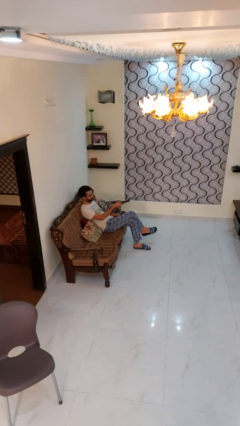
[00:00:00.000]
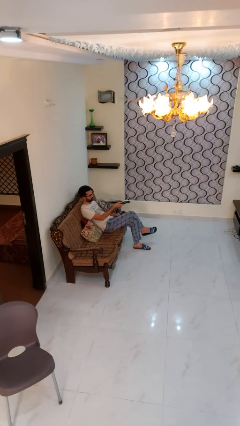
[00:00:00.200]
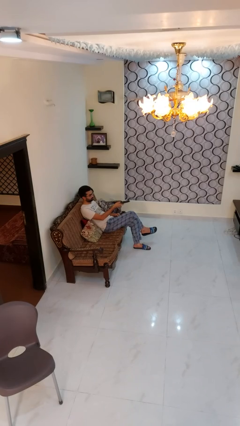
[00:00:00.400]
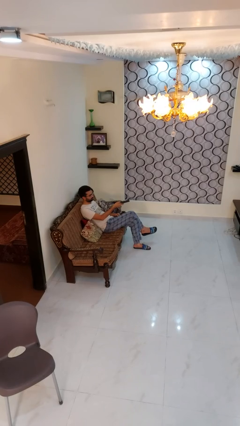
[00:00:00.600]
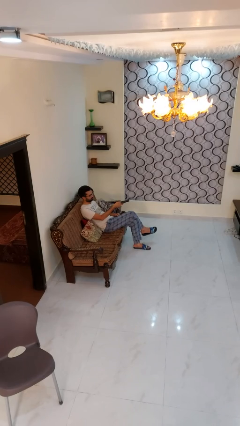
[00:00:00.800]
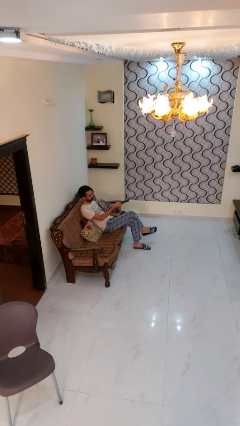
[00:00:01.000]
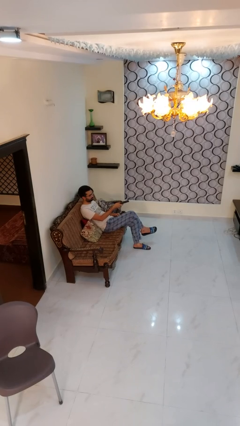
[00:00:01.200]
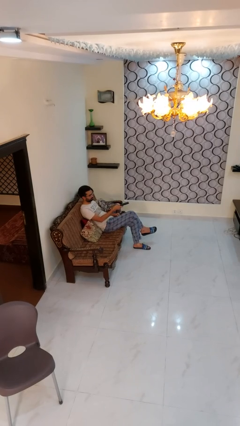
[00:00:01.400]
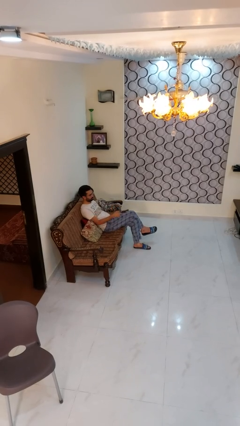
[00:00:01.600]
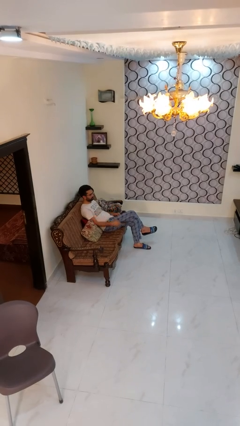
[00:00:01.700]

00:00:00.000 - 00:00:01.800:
person uses television remote

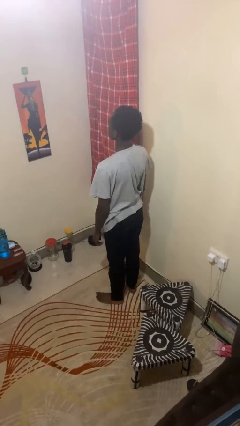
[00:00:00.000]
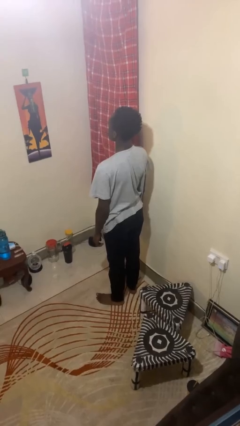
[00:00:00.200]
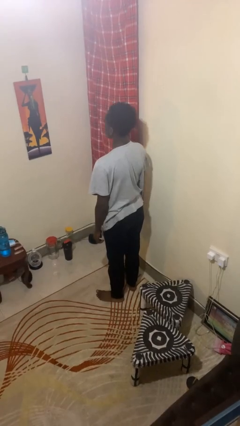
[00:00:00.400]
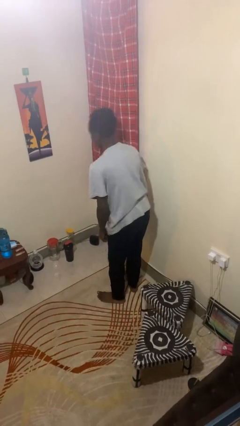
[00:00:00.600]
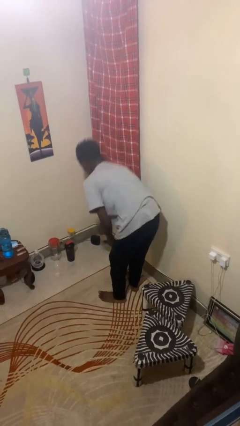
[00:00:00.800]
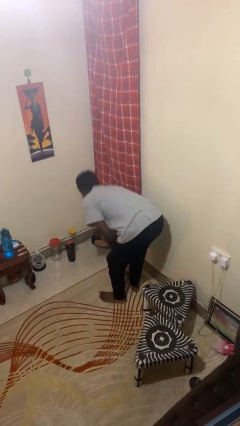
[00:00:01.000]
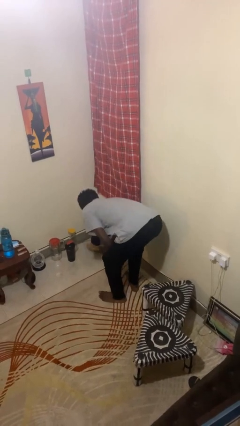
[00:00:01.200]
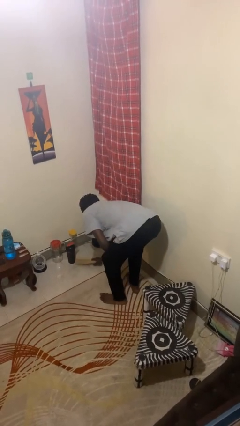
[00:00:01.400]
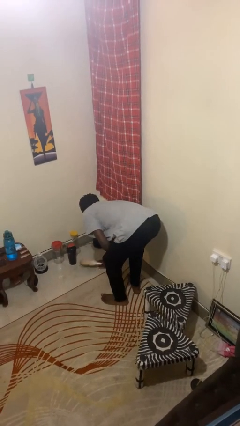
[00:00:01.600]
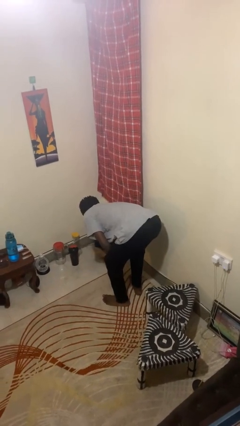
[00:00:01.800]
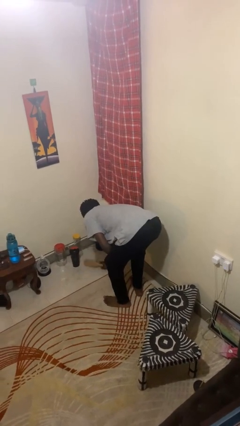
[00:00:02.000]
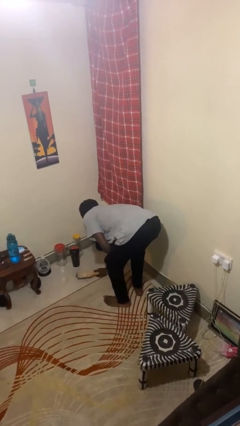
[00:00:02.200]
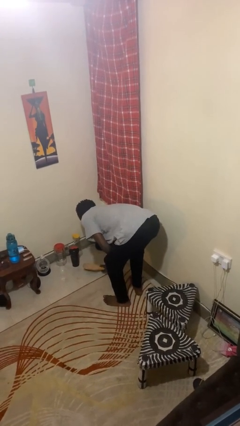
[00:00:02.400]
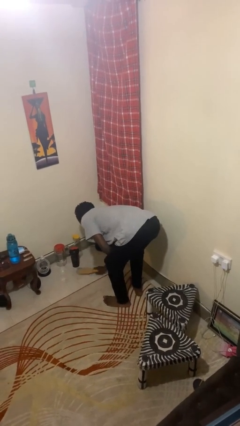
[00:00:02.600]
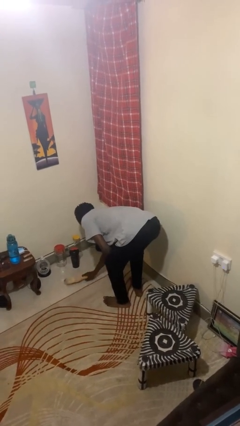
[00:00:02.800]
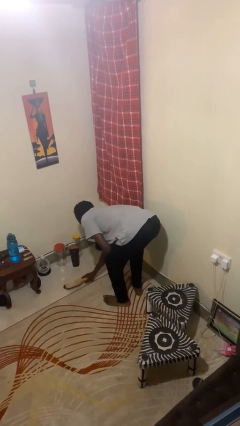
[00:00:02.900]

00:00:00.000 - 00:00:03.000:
person sweeps floor

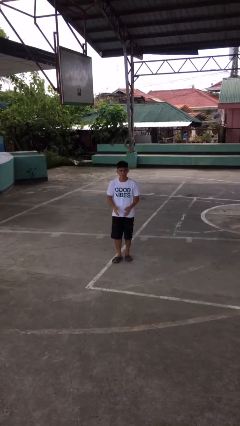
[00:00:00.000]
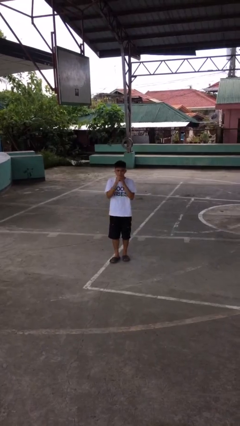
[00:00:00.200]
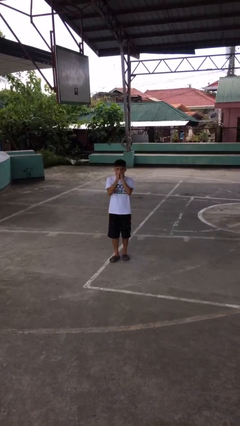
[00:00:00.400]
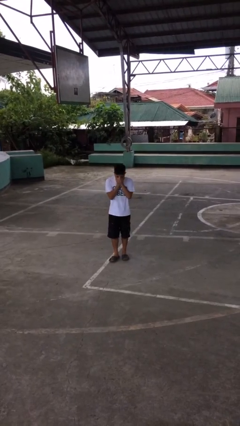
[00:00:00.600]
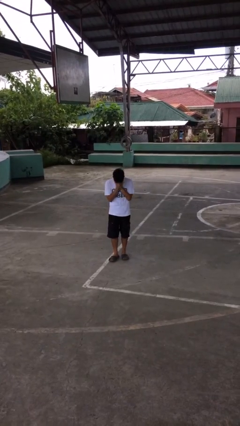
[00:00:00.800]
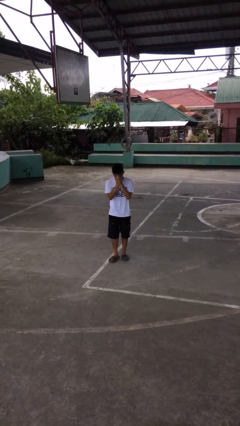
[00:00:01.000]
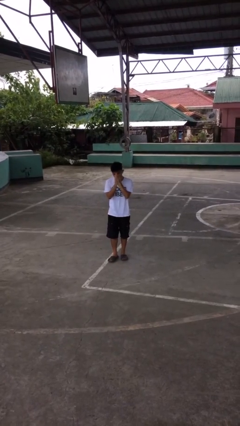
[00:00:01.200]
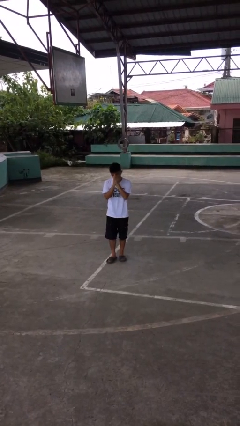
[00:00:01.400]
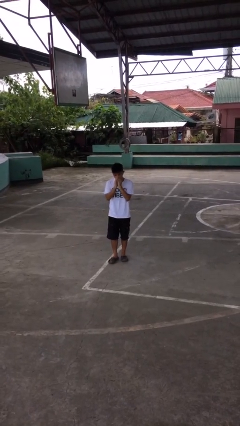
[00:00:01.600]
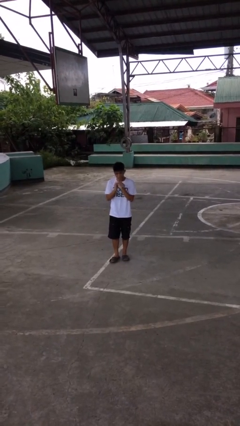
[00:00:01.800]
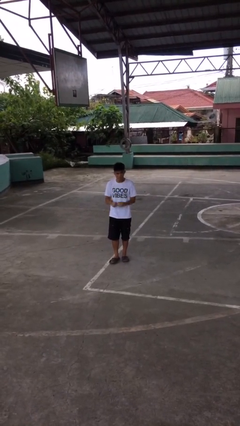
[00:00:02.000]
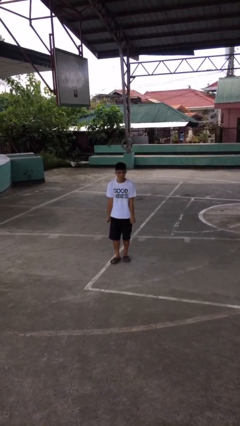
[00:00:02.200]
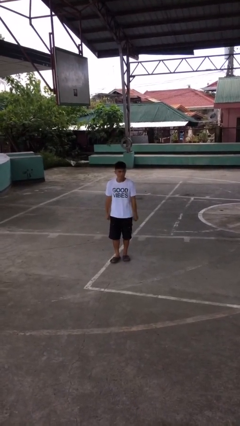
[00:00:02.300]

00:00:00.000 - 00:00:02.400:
person sneezes into hand

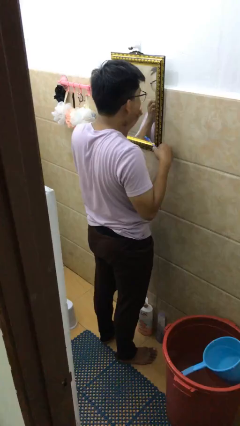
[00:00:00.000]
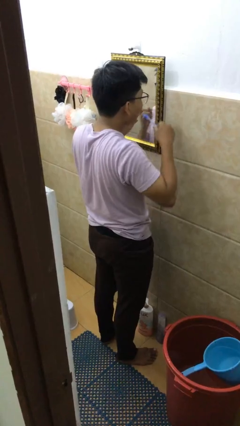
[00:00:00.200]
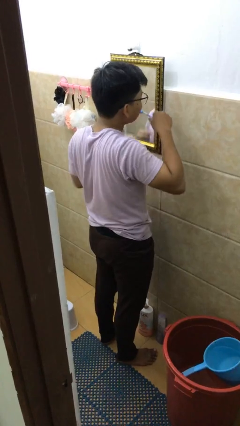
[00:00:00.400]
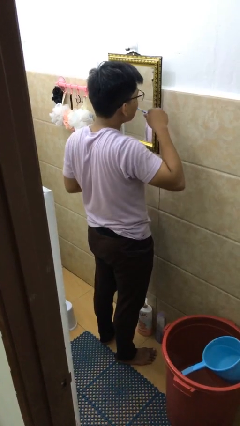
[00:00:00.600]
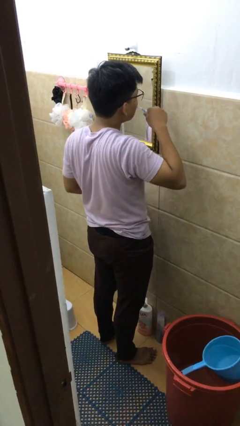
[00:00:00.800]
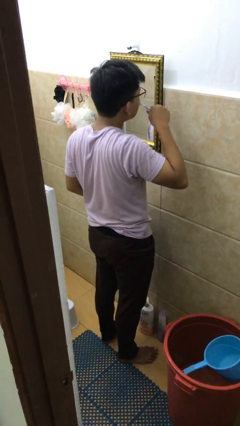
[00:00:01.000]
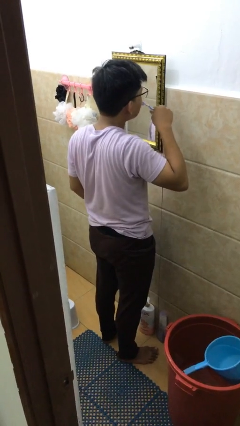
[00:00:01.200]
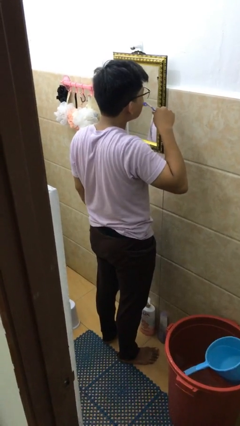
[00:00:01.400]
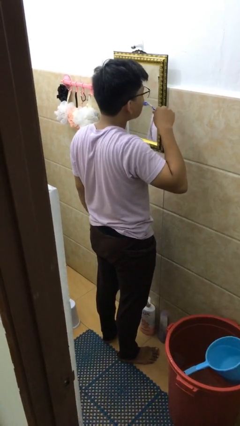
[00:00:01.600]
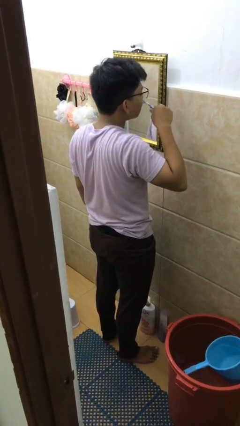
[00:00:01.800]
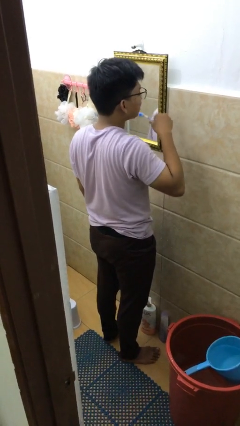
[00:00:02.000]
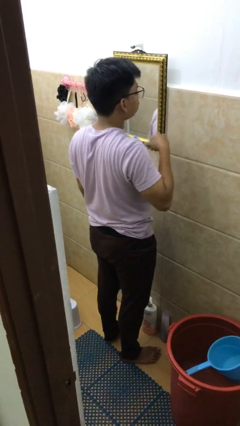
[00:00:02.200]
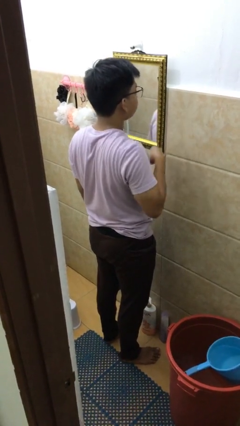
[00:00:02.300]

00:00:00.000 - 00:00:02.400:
person brushes teeth

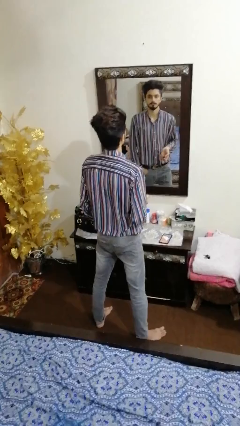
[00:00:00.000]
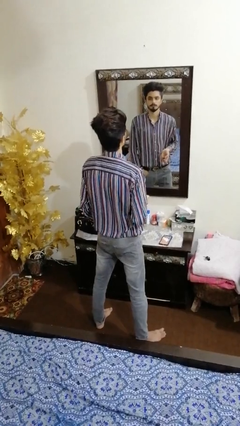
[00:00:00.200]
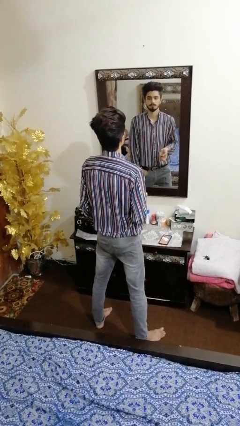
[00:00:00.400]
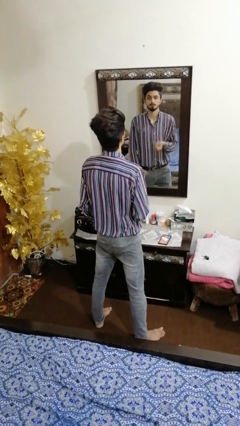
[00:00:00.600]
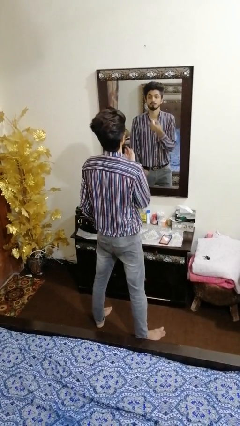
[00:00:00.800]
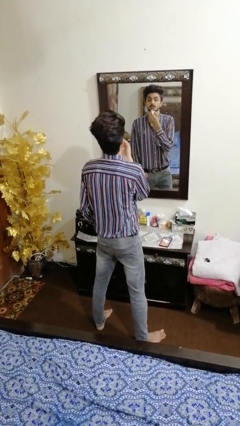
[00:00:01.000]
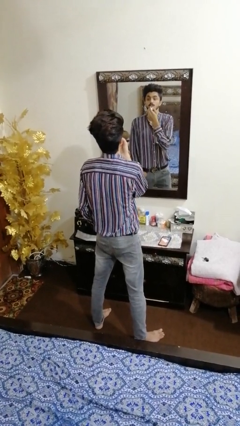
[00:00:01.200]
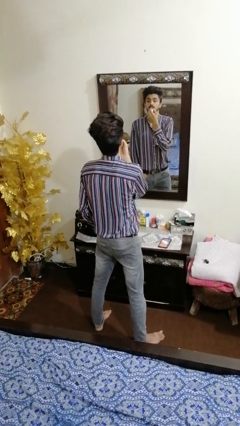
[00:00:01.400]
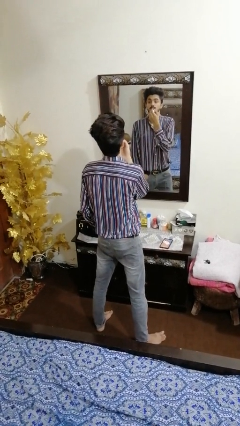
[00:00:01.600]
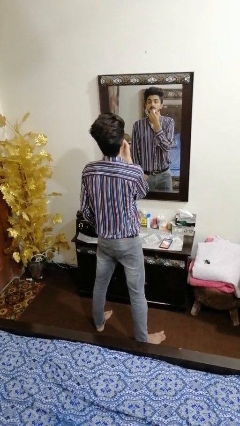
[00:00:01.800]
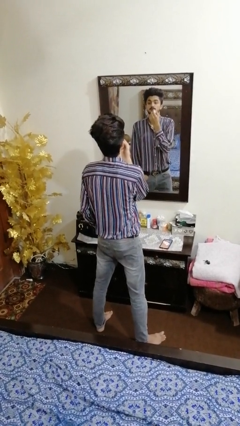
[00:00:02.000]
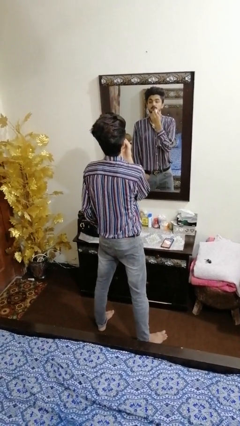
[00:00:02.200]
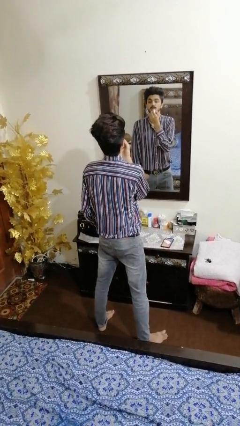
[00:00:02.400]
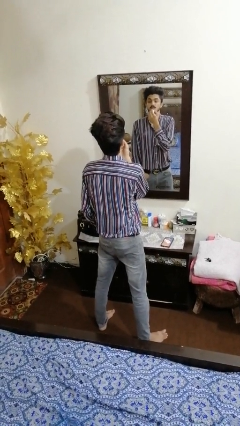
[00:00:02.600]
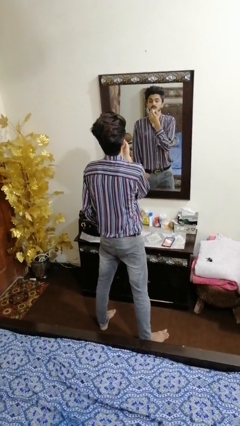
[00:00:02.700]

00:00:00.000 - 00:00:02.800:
person applies lip makeup

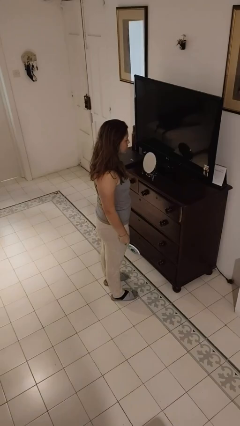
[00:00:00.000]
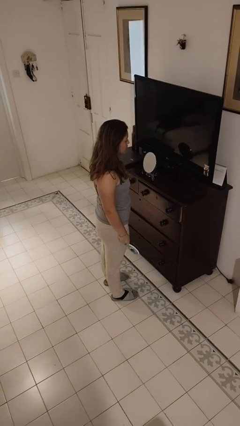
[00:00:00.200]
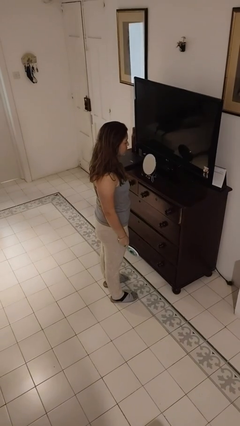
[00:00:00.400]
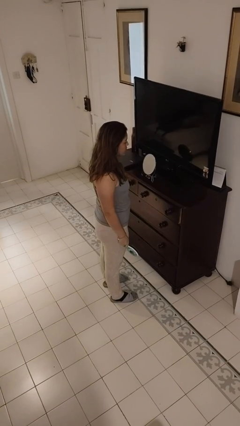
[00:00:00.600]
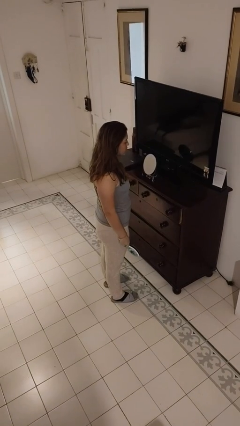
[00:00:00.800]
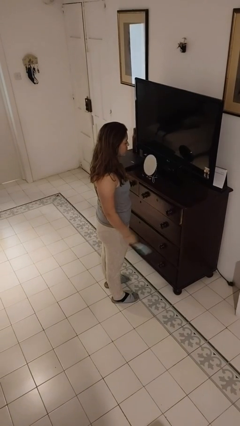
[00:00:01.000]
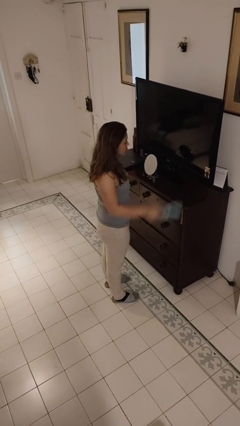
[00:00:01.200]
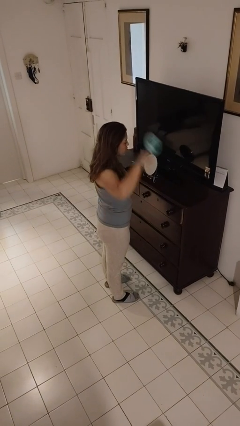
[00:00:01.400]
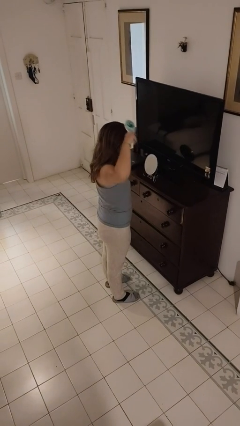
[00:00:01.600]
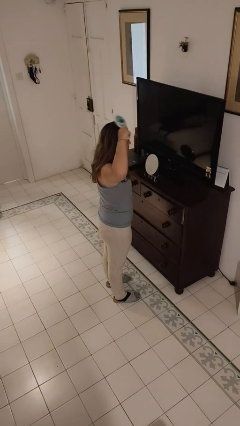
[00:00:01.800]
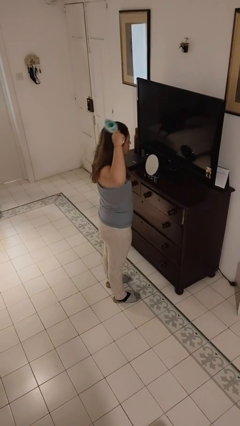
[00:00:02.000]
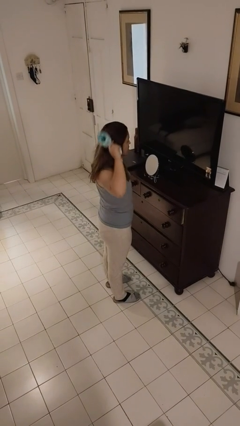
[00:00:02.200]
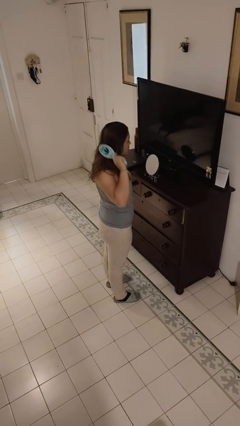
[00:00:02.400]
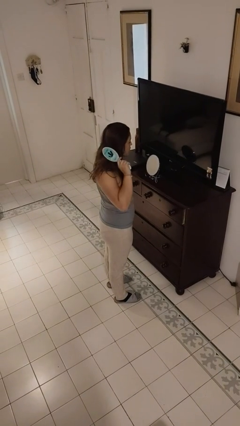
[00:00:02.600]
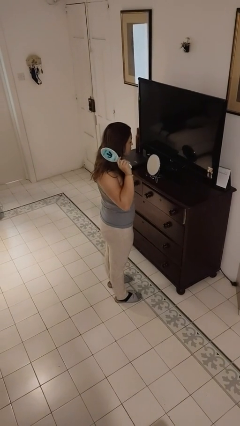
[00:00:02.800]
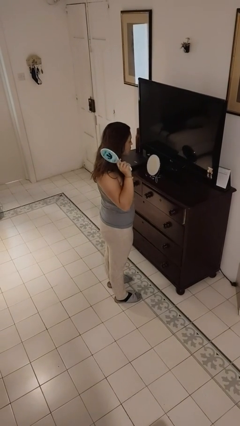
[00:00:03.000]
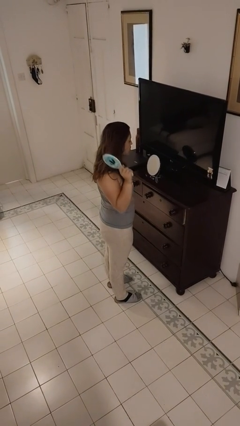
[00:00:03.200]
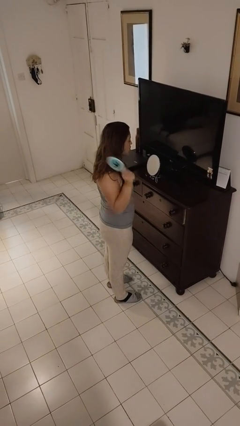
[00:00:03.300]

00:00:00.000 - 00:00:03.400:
person brushes hair

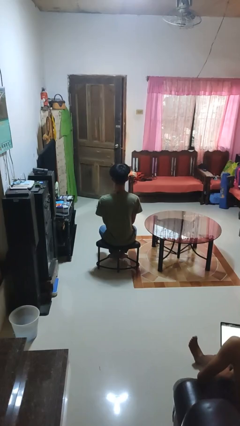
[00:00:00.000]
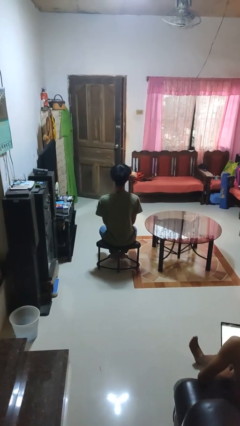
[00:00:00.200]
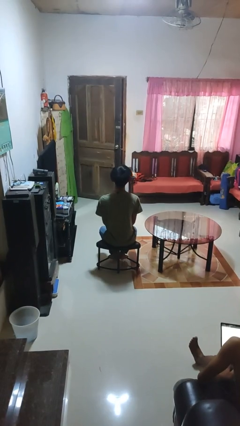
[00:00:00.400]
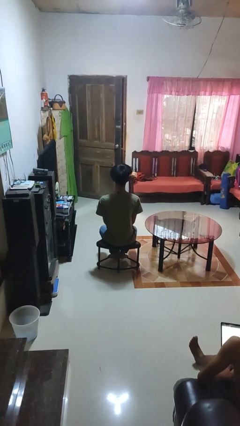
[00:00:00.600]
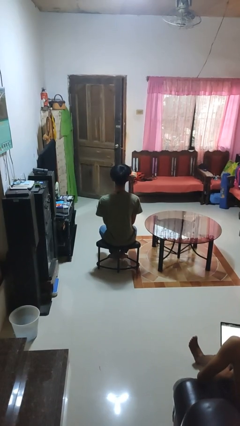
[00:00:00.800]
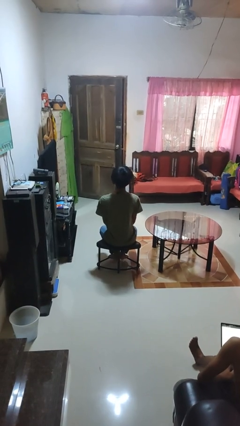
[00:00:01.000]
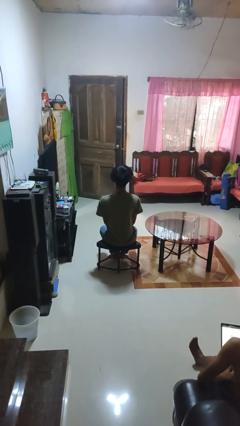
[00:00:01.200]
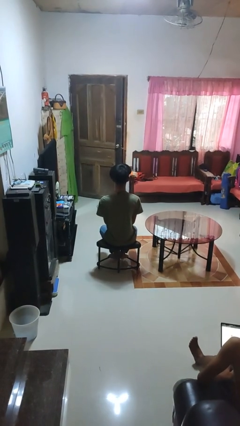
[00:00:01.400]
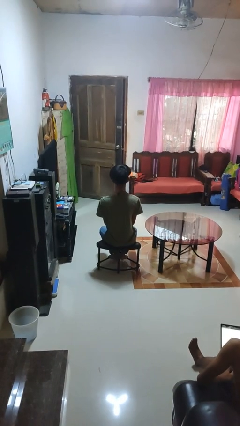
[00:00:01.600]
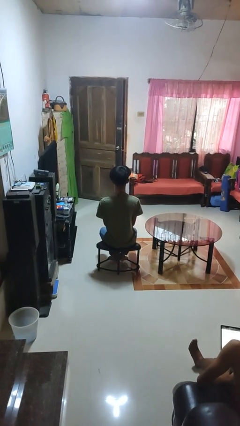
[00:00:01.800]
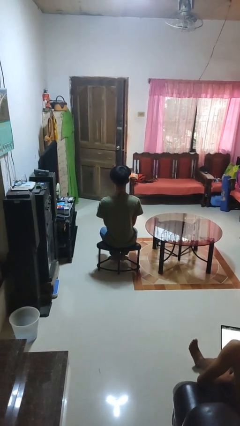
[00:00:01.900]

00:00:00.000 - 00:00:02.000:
person nods head
